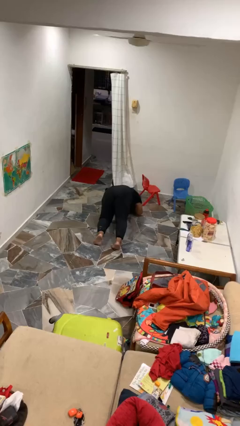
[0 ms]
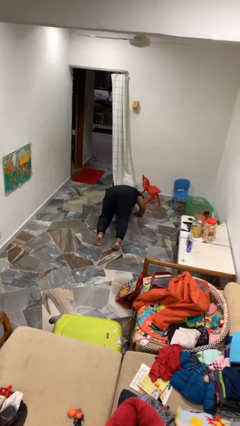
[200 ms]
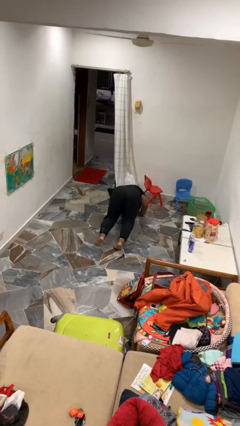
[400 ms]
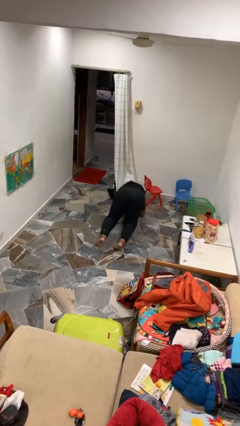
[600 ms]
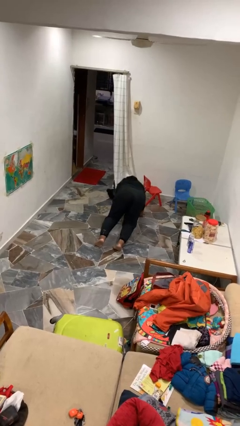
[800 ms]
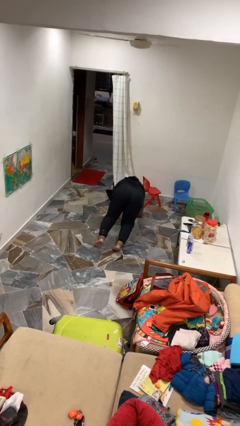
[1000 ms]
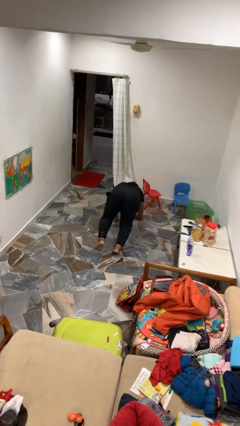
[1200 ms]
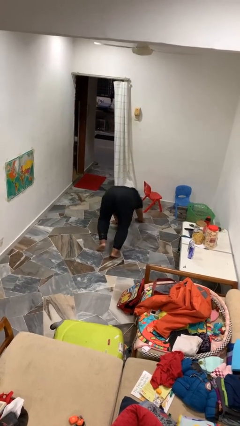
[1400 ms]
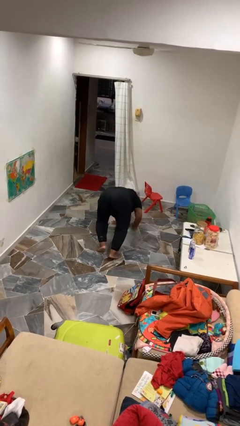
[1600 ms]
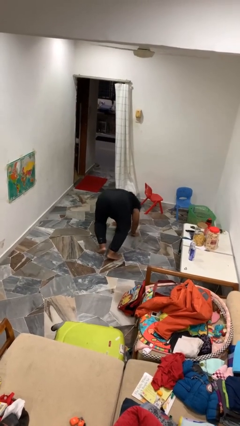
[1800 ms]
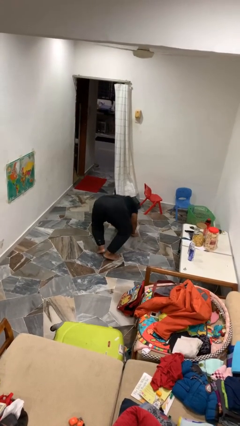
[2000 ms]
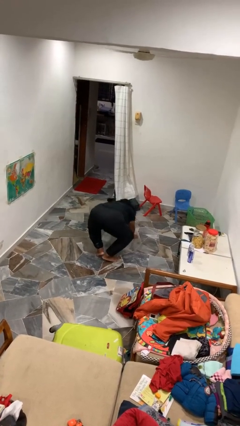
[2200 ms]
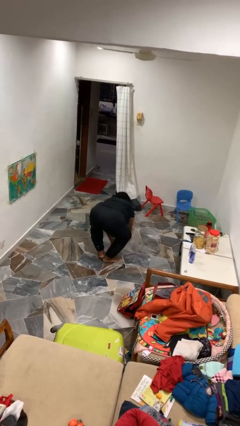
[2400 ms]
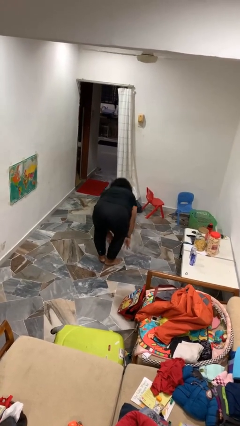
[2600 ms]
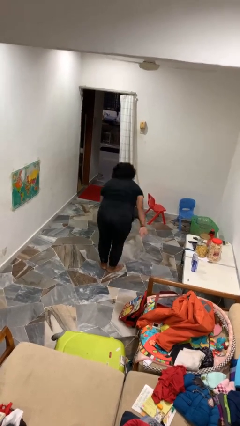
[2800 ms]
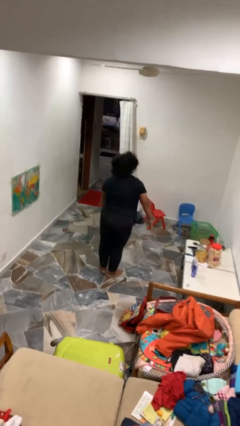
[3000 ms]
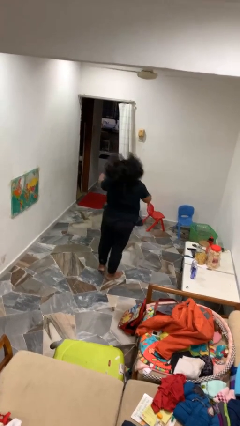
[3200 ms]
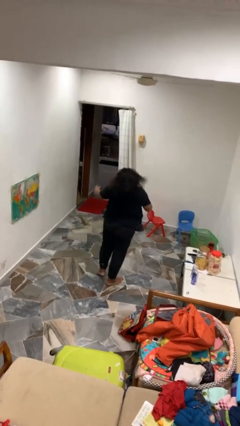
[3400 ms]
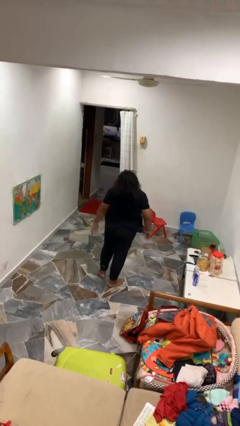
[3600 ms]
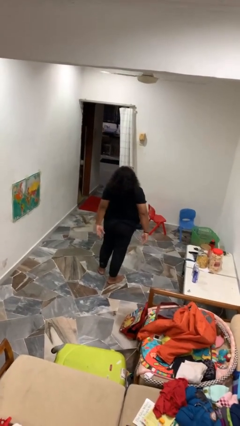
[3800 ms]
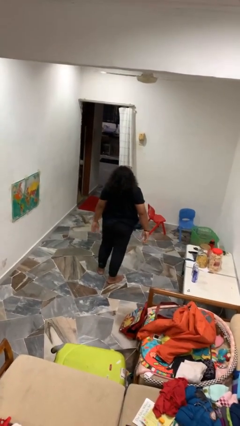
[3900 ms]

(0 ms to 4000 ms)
person stands up from floor

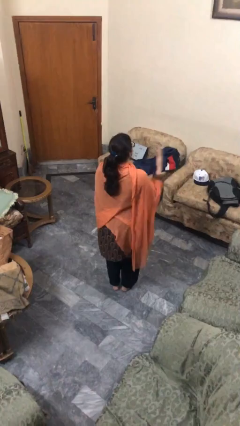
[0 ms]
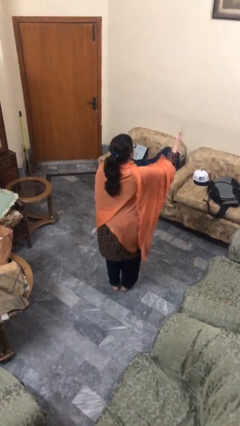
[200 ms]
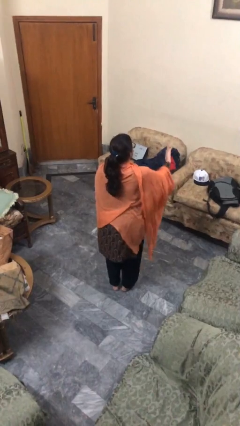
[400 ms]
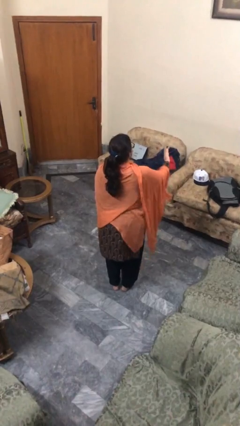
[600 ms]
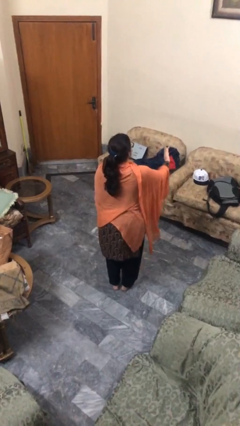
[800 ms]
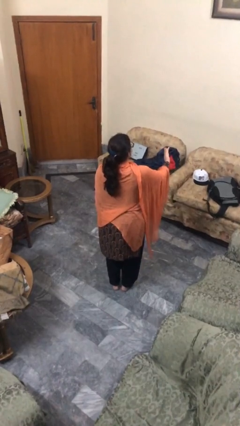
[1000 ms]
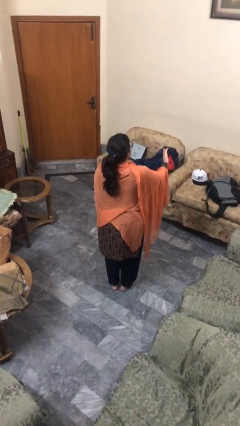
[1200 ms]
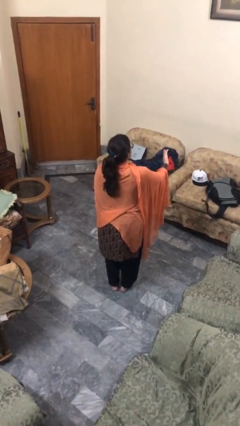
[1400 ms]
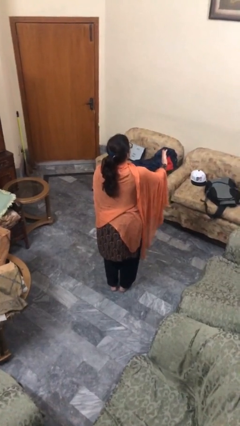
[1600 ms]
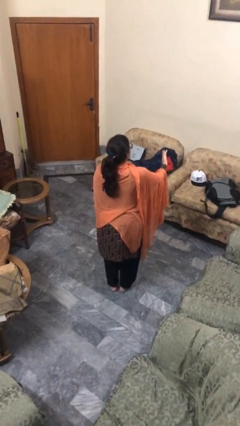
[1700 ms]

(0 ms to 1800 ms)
person karate chop

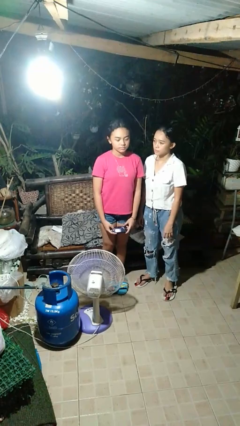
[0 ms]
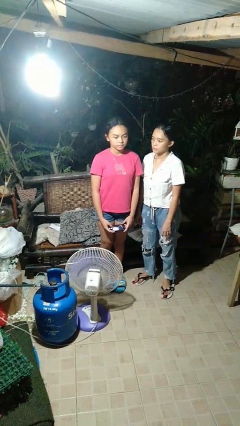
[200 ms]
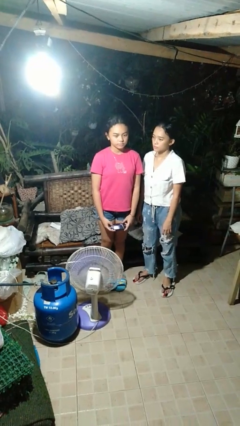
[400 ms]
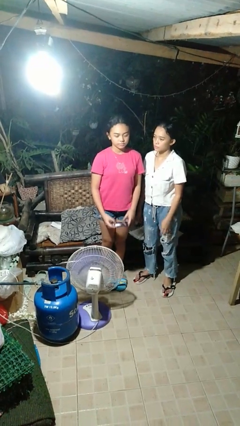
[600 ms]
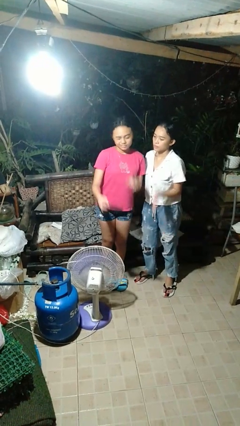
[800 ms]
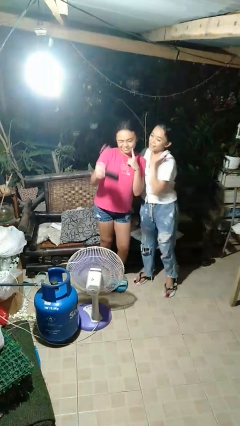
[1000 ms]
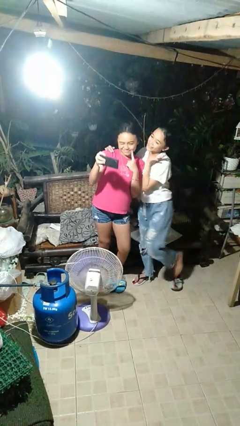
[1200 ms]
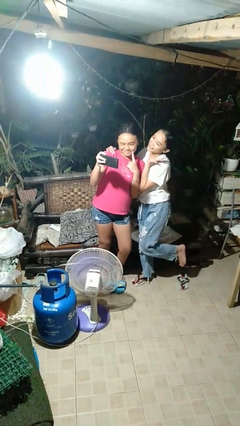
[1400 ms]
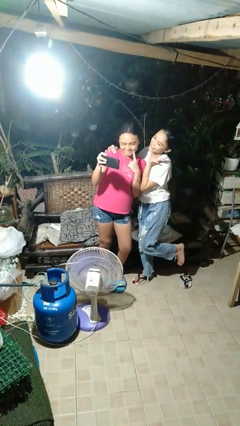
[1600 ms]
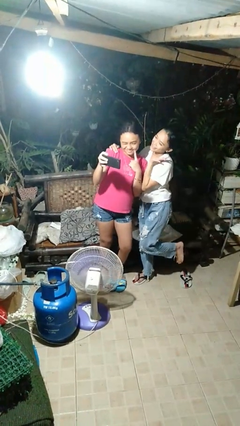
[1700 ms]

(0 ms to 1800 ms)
person takes selfie with person

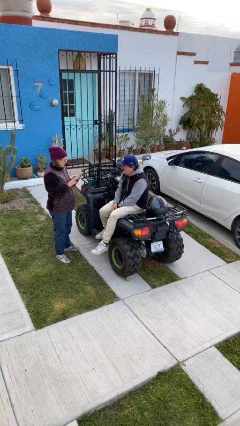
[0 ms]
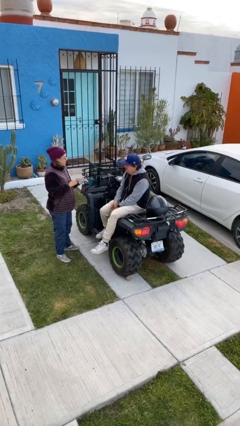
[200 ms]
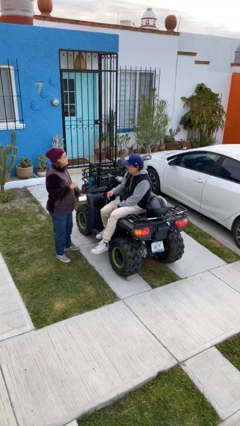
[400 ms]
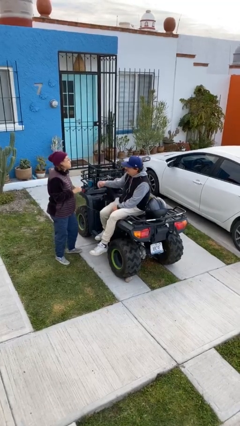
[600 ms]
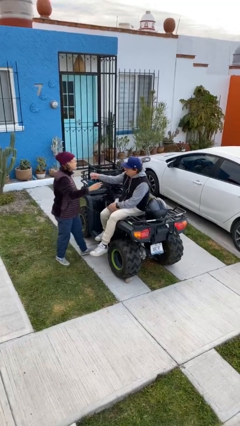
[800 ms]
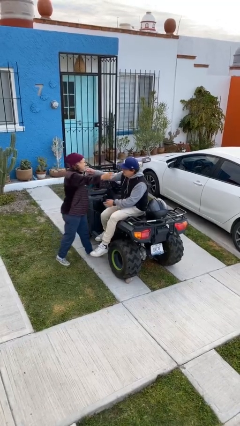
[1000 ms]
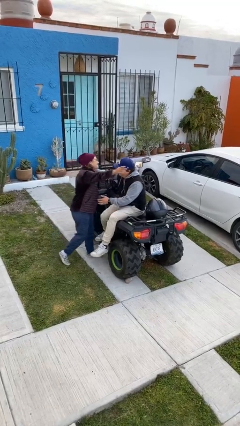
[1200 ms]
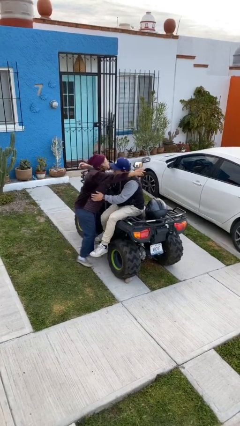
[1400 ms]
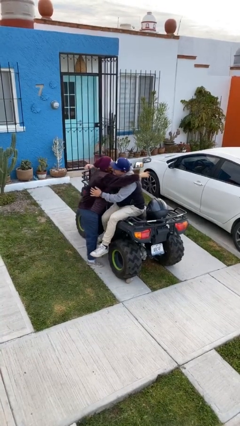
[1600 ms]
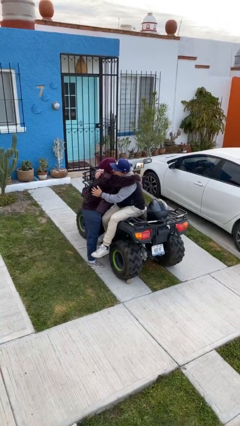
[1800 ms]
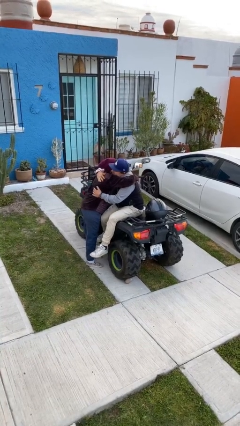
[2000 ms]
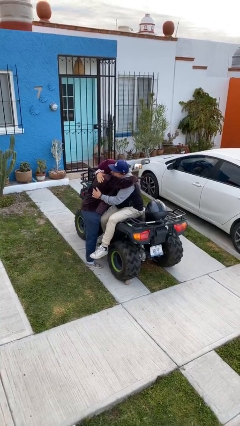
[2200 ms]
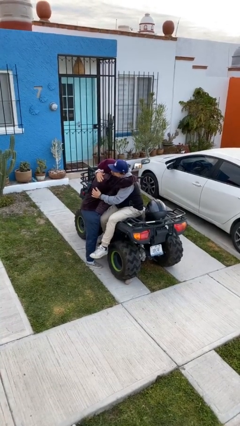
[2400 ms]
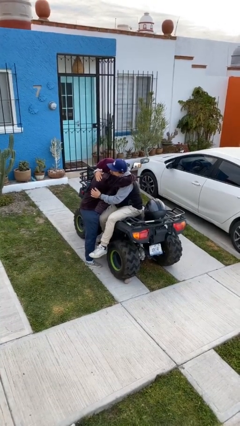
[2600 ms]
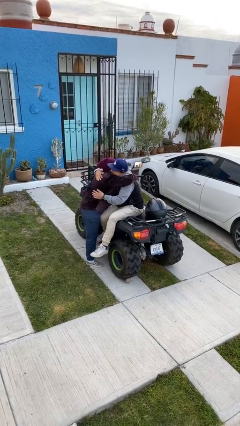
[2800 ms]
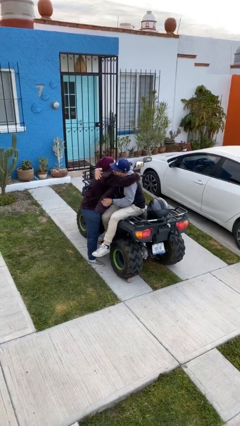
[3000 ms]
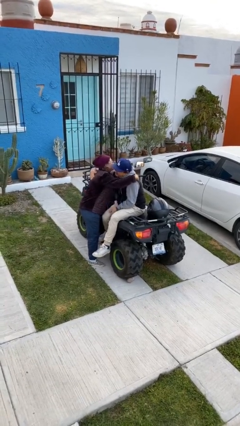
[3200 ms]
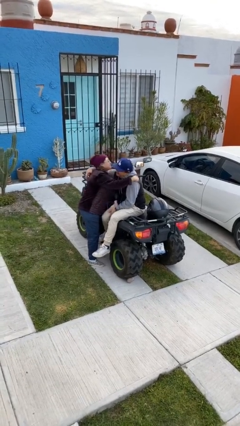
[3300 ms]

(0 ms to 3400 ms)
person embraces person

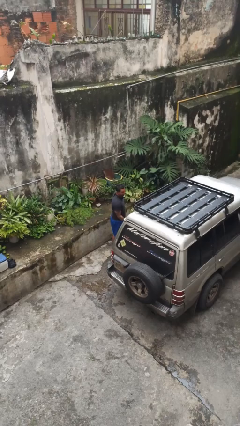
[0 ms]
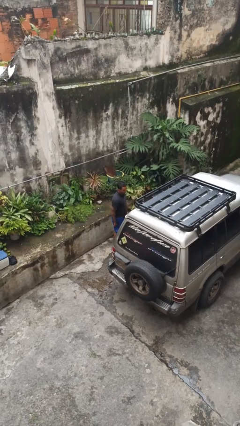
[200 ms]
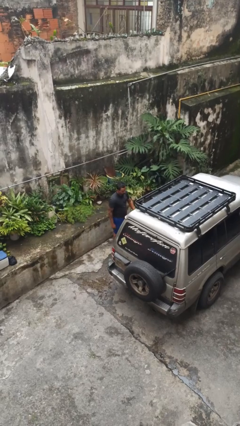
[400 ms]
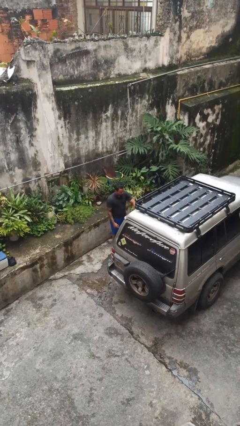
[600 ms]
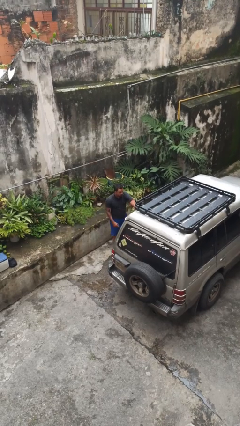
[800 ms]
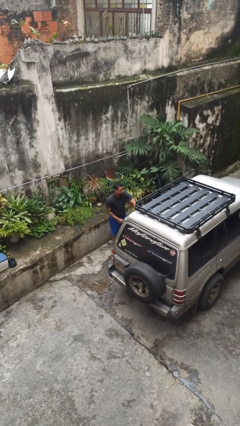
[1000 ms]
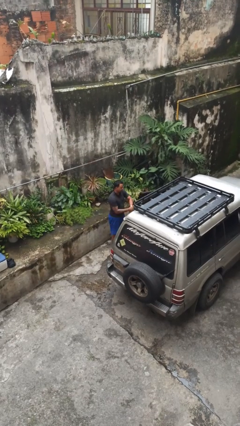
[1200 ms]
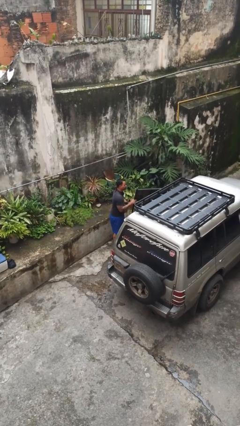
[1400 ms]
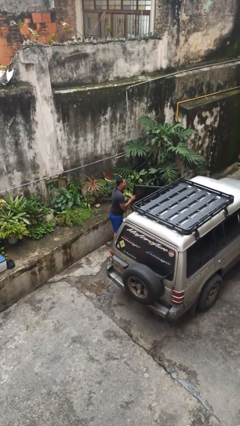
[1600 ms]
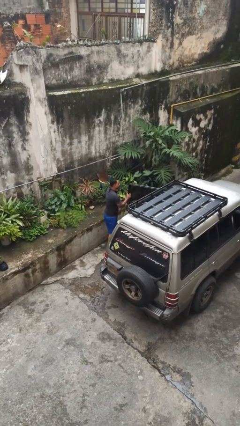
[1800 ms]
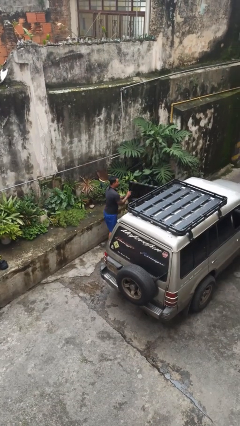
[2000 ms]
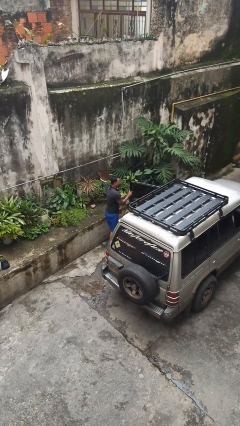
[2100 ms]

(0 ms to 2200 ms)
person opens car door

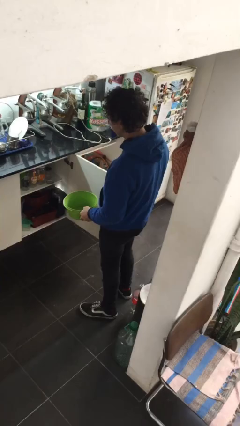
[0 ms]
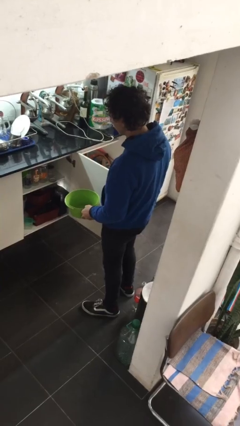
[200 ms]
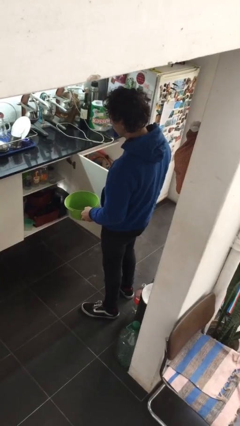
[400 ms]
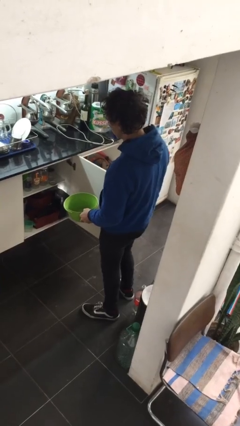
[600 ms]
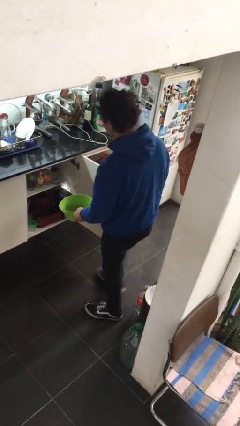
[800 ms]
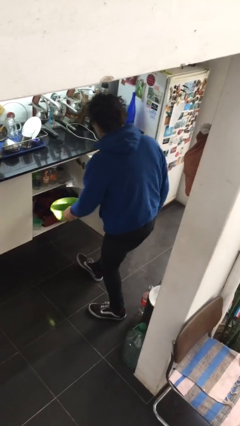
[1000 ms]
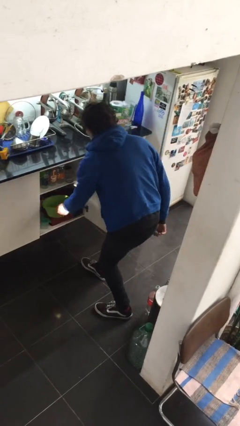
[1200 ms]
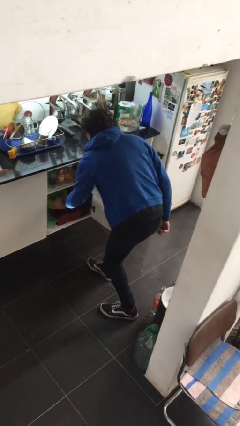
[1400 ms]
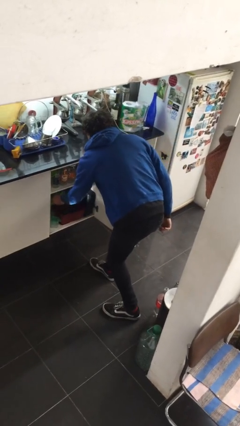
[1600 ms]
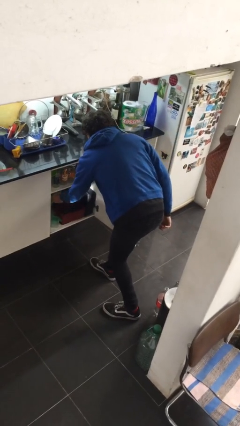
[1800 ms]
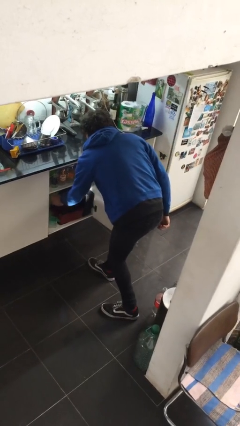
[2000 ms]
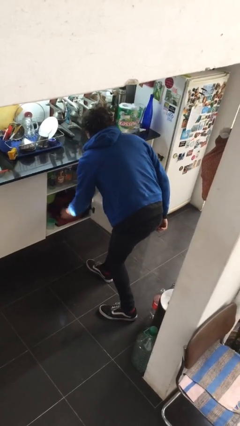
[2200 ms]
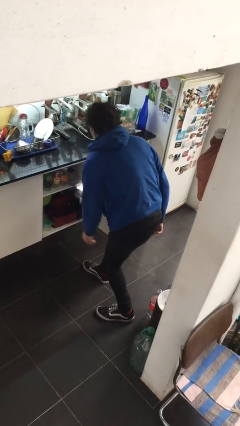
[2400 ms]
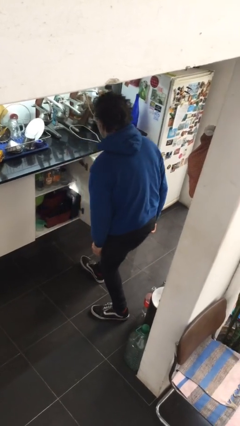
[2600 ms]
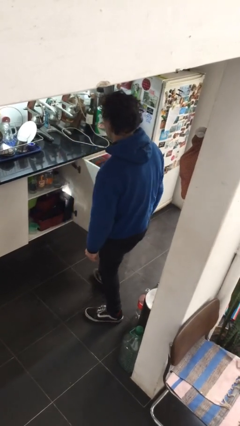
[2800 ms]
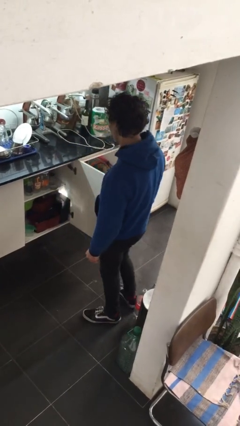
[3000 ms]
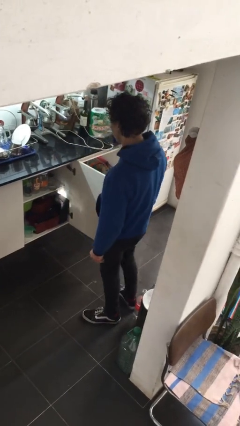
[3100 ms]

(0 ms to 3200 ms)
person puts down object into cabinet

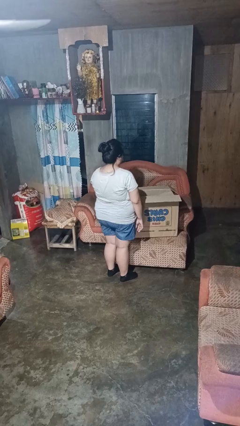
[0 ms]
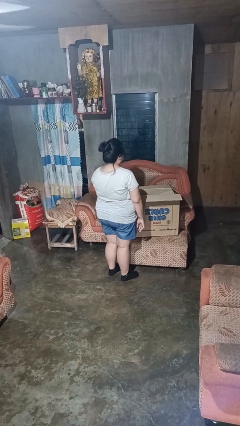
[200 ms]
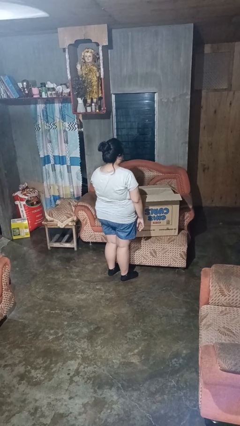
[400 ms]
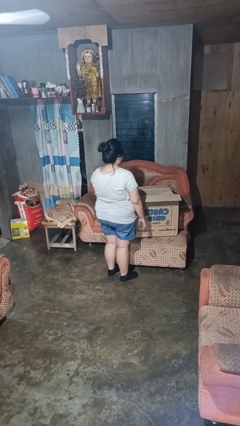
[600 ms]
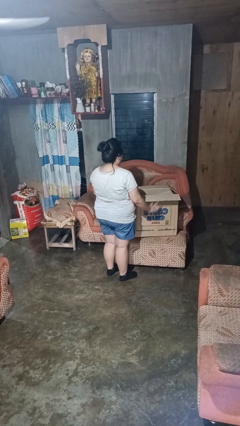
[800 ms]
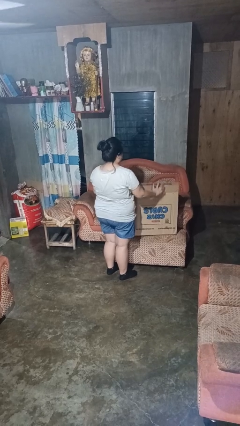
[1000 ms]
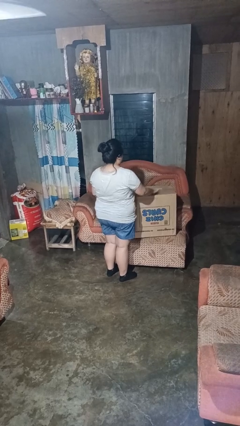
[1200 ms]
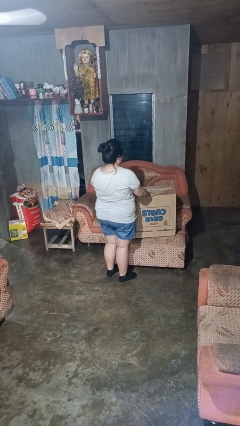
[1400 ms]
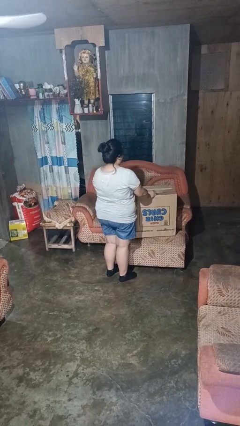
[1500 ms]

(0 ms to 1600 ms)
person closes box
